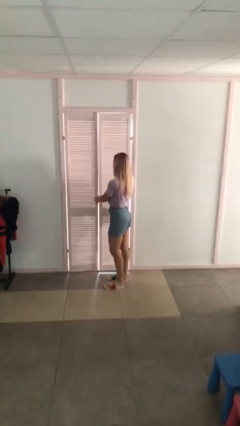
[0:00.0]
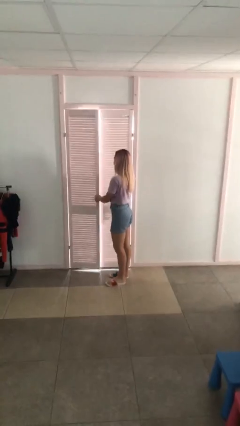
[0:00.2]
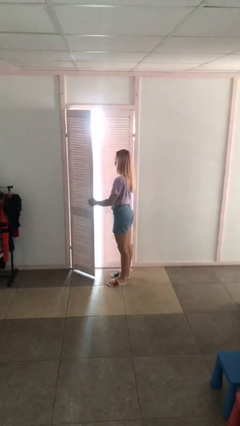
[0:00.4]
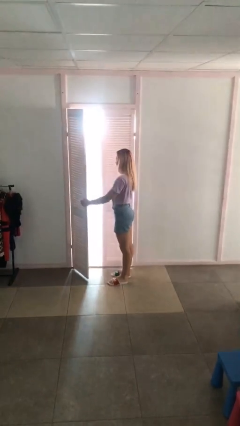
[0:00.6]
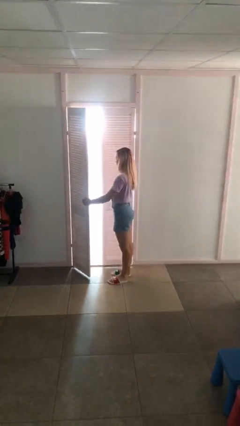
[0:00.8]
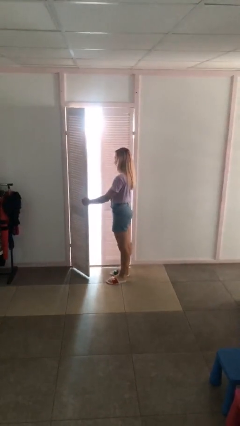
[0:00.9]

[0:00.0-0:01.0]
person opens facility door

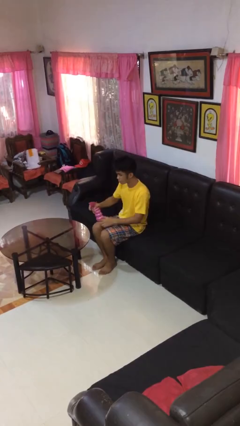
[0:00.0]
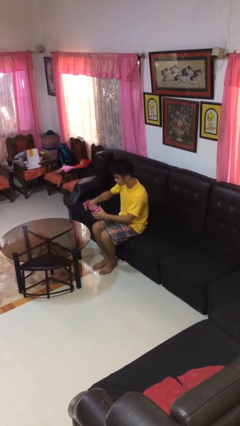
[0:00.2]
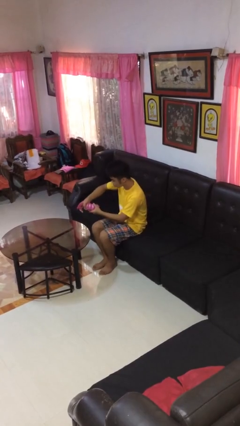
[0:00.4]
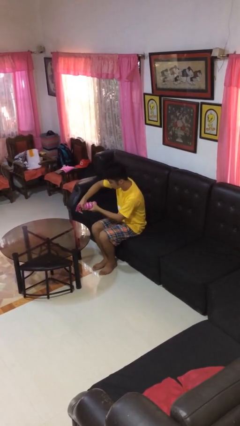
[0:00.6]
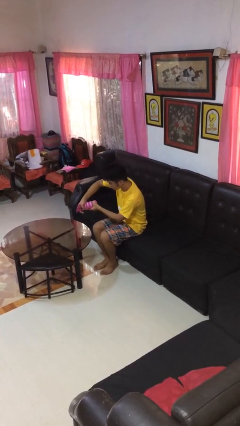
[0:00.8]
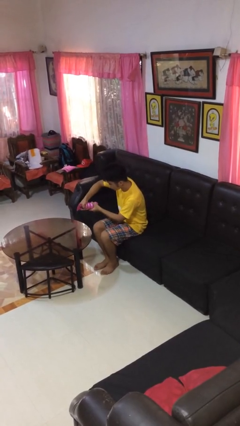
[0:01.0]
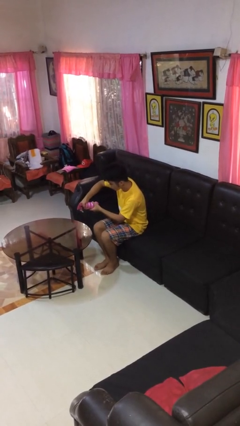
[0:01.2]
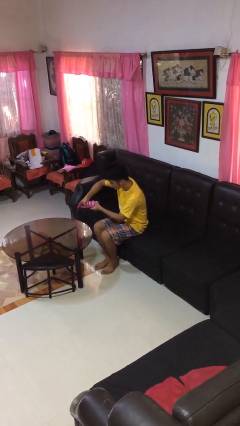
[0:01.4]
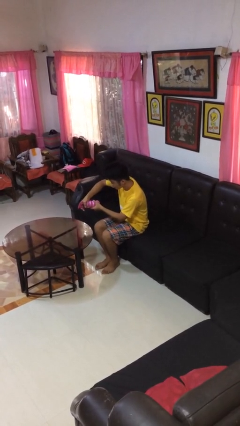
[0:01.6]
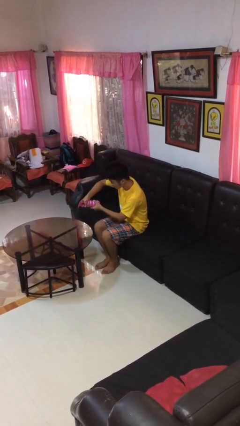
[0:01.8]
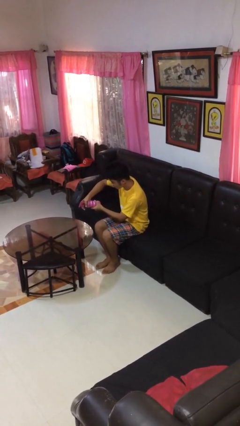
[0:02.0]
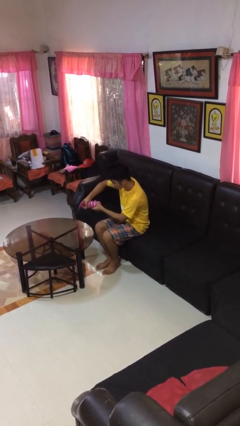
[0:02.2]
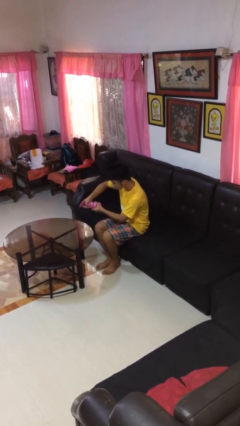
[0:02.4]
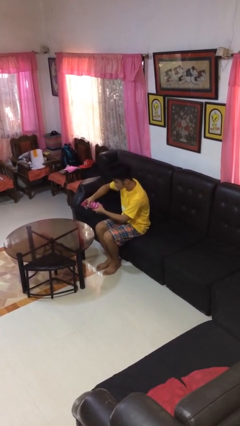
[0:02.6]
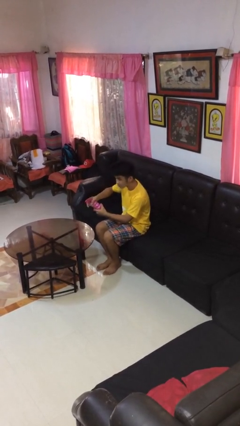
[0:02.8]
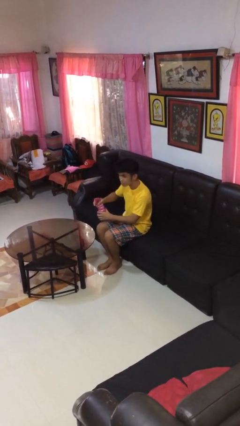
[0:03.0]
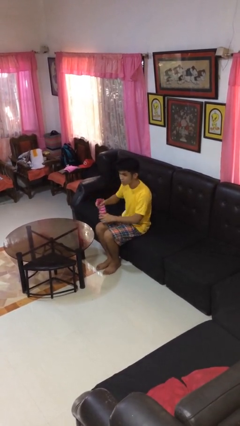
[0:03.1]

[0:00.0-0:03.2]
person sprays from bottle

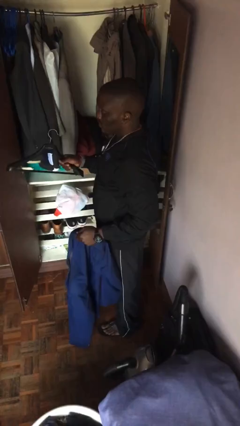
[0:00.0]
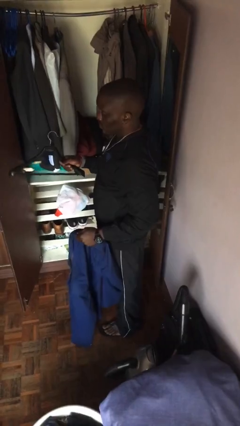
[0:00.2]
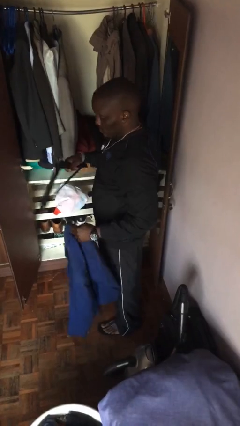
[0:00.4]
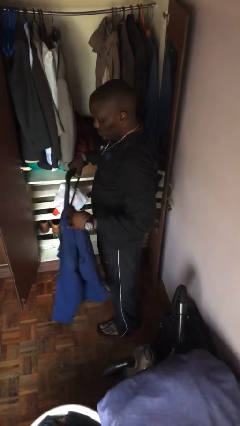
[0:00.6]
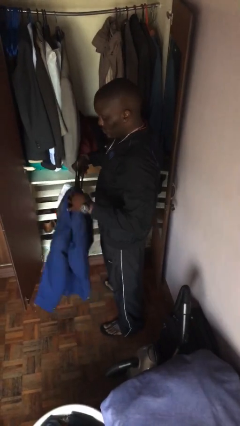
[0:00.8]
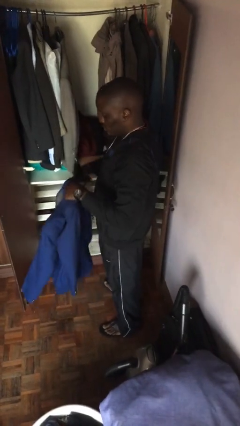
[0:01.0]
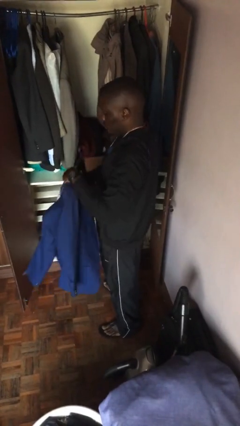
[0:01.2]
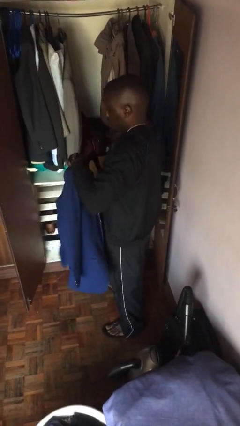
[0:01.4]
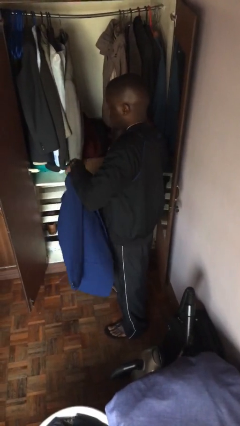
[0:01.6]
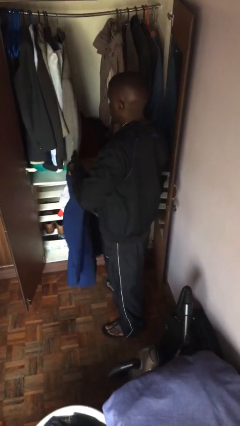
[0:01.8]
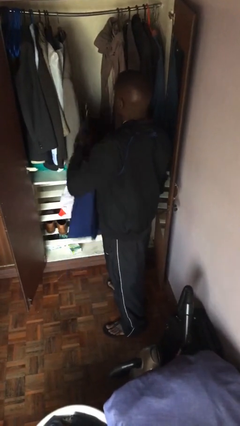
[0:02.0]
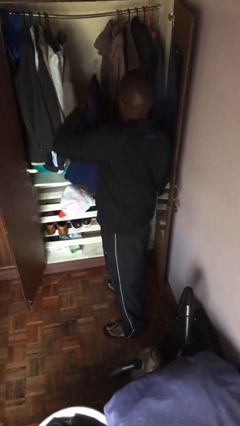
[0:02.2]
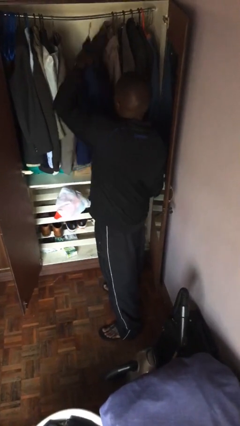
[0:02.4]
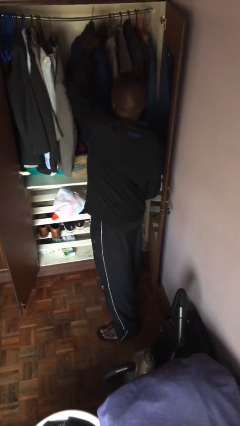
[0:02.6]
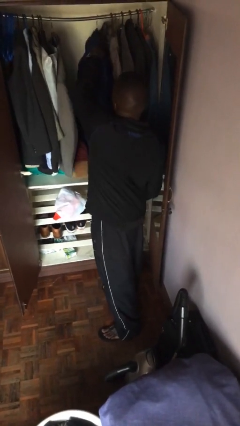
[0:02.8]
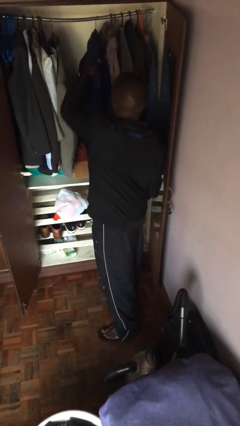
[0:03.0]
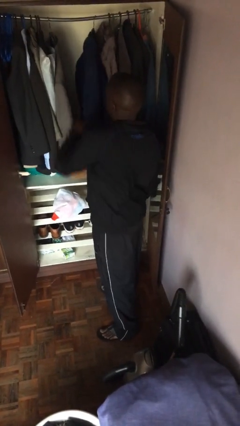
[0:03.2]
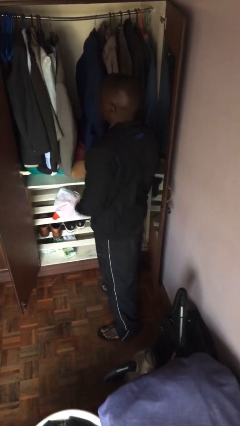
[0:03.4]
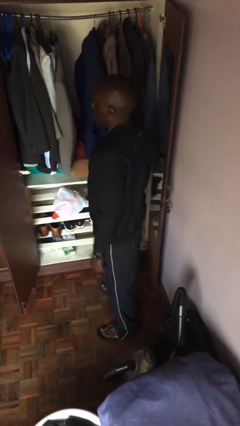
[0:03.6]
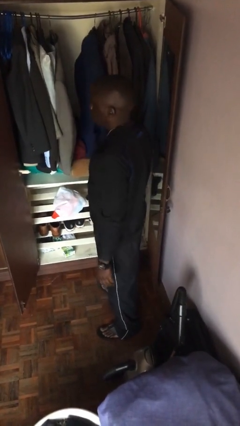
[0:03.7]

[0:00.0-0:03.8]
person puts clothes into closet

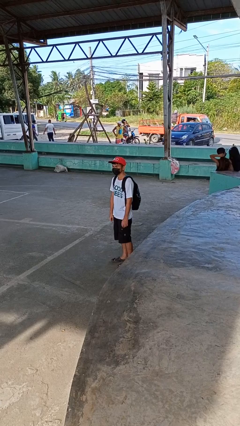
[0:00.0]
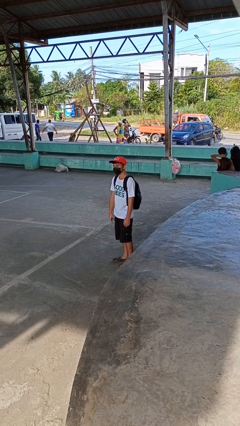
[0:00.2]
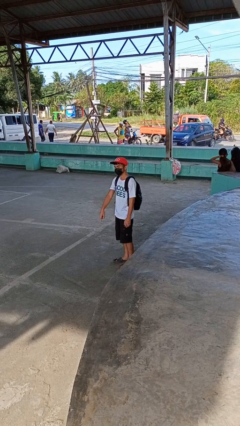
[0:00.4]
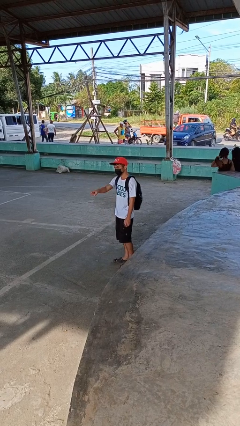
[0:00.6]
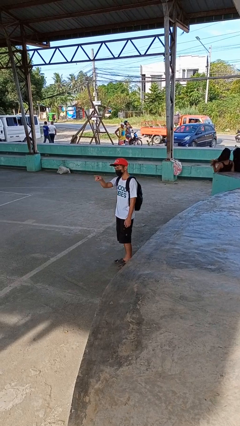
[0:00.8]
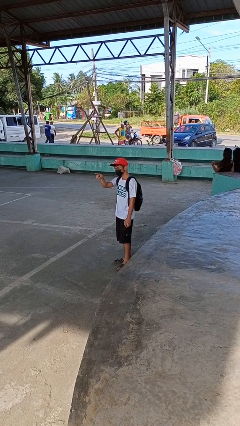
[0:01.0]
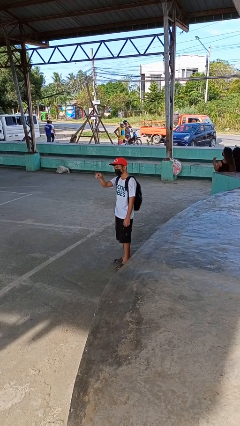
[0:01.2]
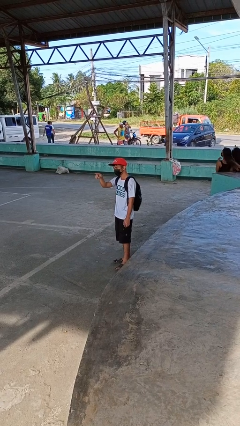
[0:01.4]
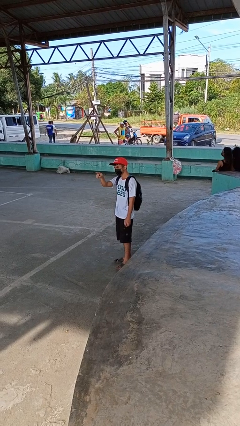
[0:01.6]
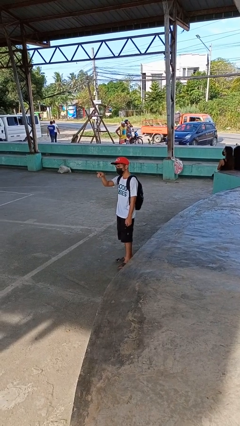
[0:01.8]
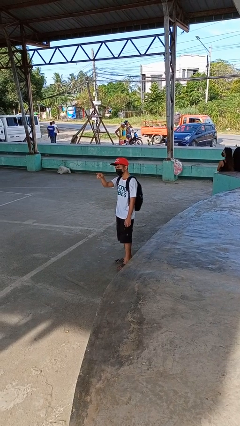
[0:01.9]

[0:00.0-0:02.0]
person points at person

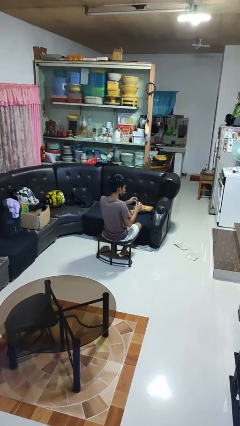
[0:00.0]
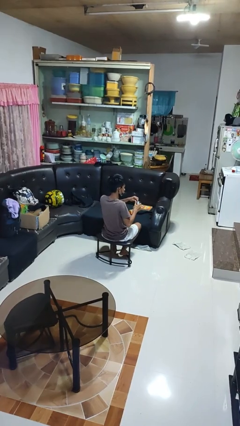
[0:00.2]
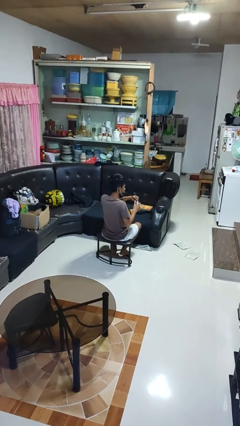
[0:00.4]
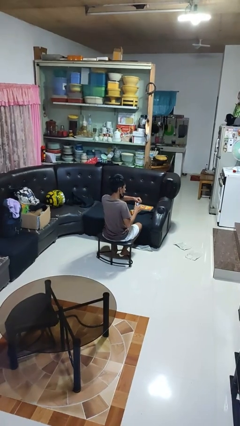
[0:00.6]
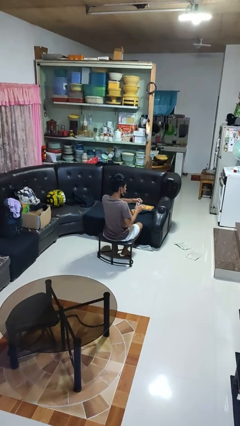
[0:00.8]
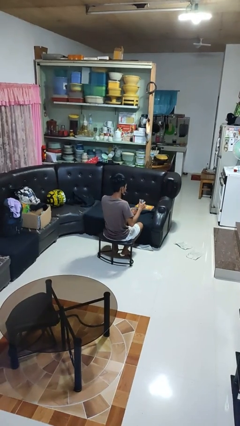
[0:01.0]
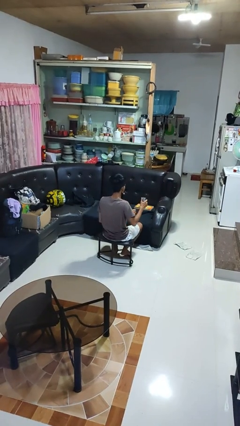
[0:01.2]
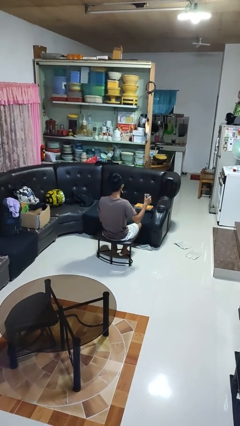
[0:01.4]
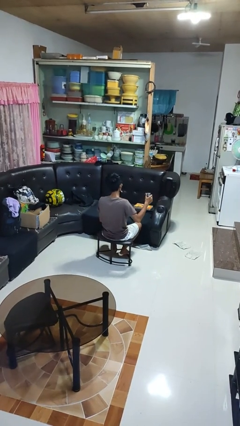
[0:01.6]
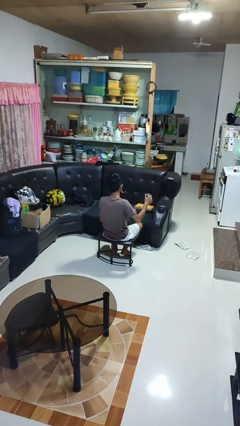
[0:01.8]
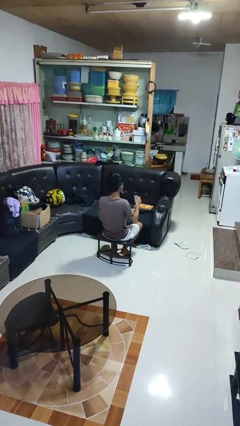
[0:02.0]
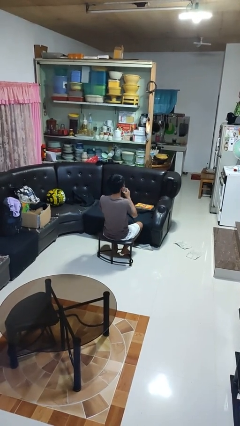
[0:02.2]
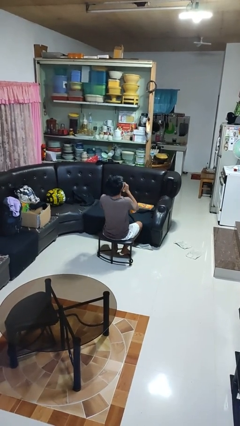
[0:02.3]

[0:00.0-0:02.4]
person opens beverage can

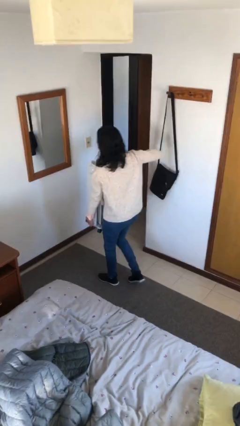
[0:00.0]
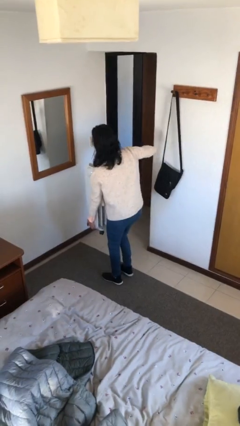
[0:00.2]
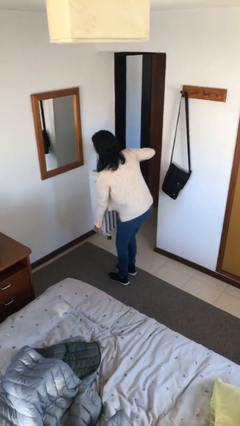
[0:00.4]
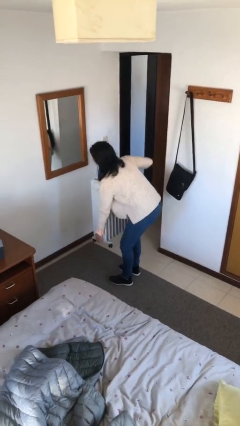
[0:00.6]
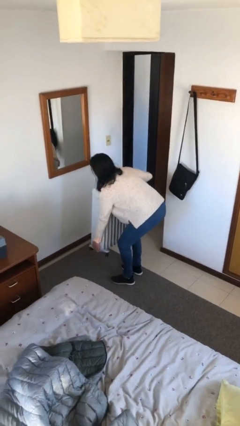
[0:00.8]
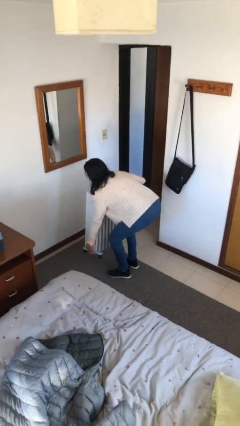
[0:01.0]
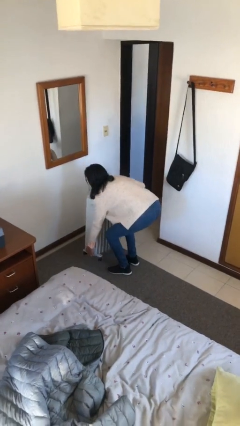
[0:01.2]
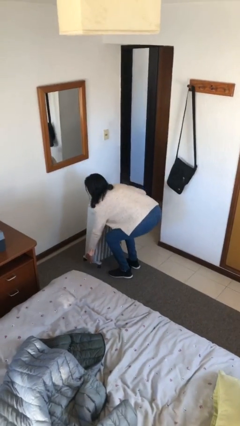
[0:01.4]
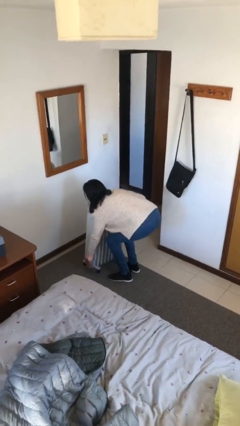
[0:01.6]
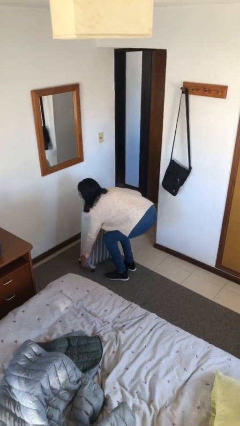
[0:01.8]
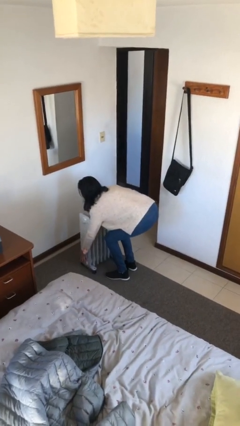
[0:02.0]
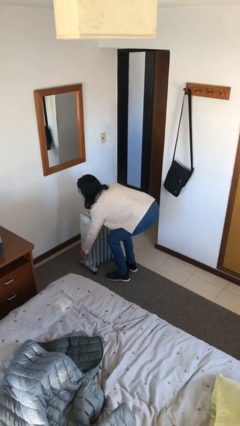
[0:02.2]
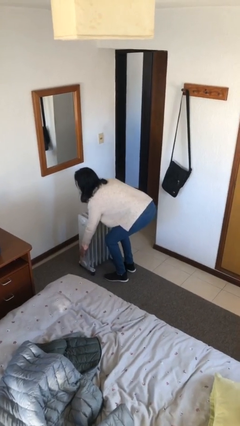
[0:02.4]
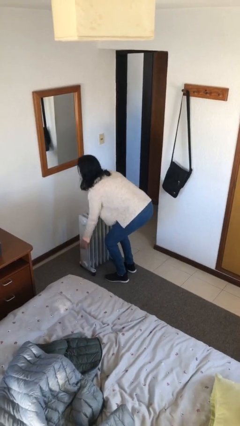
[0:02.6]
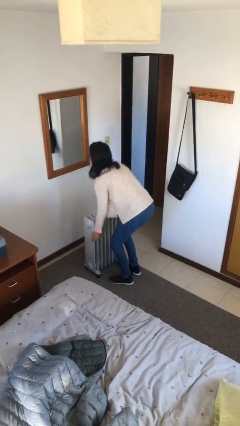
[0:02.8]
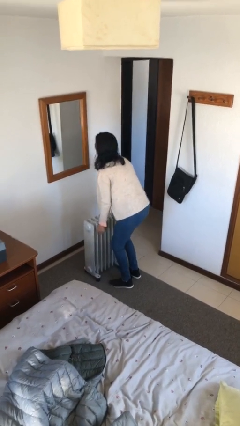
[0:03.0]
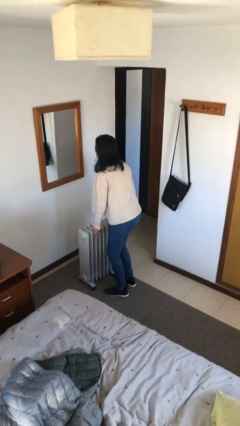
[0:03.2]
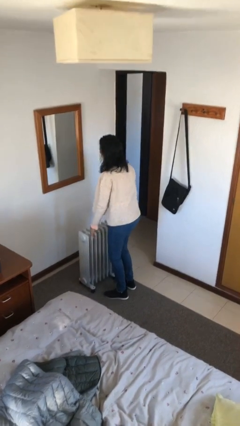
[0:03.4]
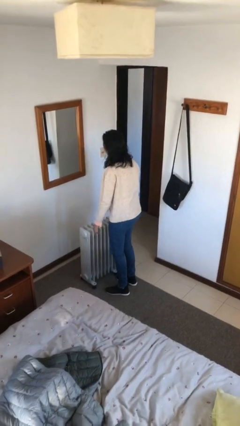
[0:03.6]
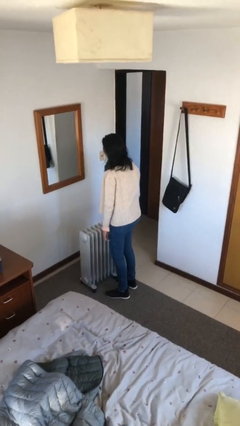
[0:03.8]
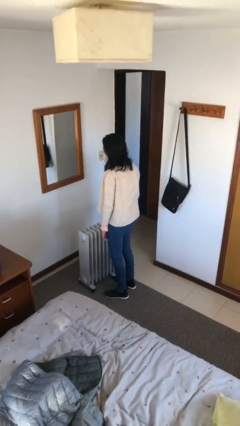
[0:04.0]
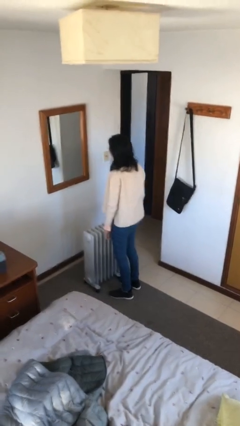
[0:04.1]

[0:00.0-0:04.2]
person puts down object on floor

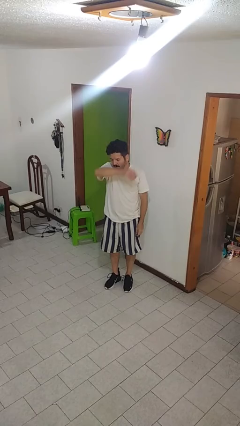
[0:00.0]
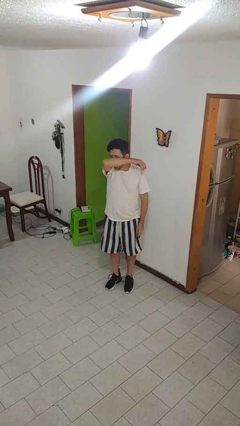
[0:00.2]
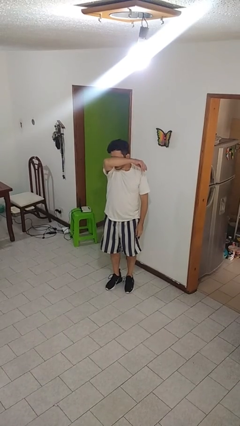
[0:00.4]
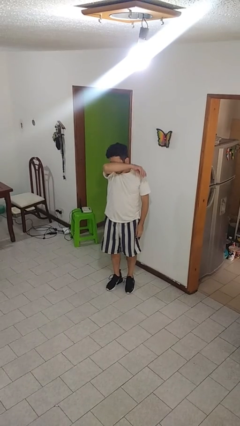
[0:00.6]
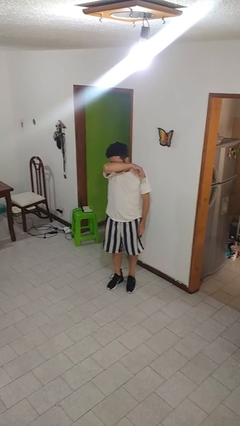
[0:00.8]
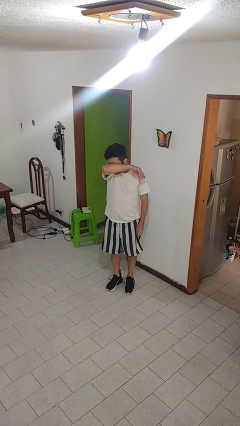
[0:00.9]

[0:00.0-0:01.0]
person sneezes into arm
